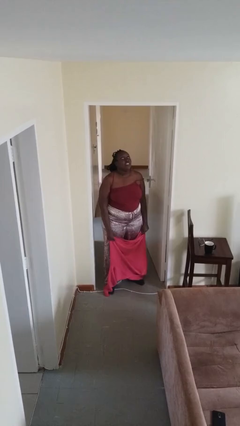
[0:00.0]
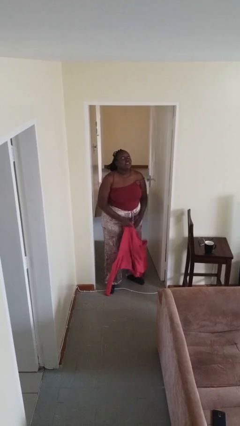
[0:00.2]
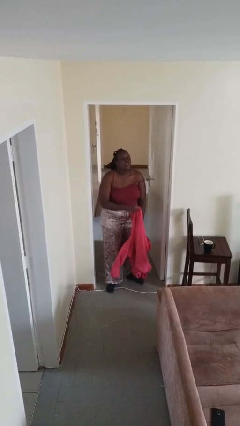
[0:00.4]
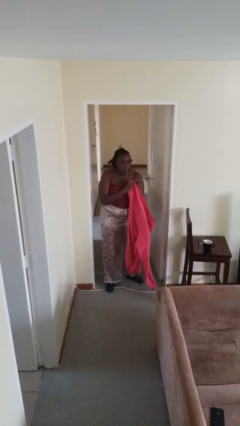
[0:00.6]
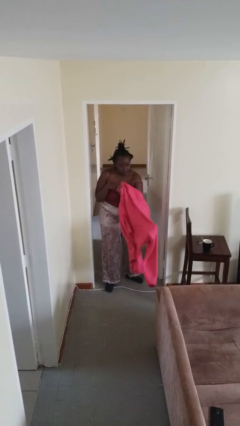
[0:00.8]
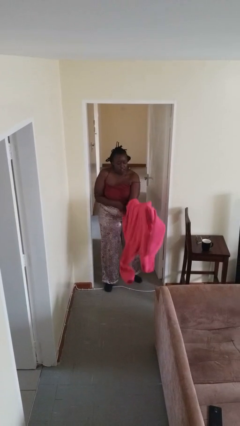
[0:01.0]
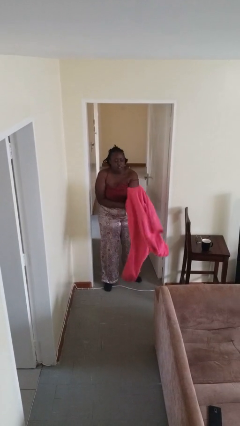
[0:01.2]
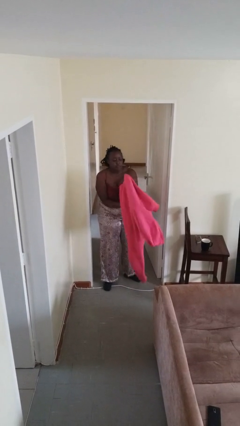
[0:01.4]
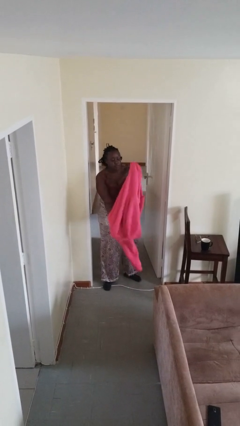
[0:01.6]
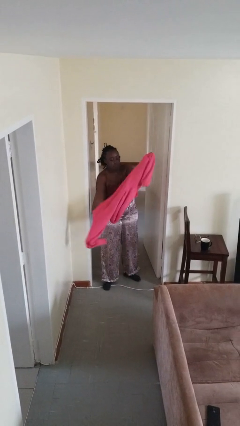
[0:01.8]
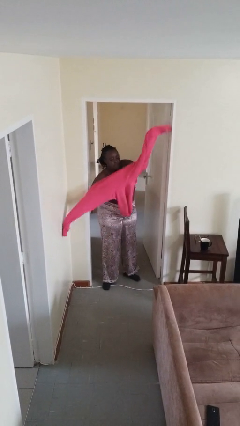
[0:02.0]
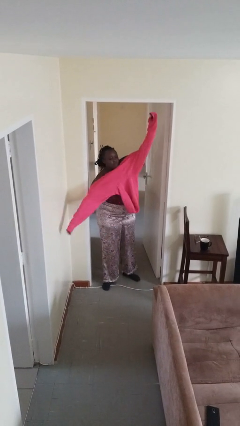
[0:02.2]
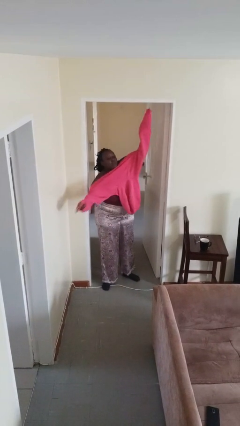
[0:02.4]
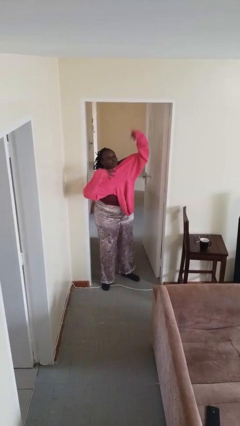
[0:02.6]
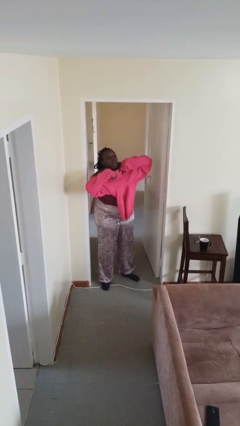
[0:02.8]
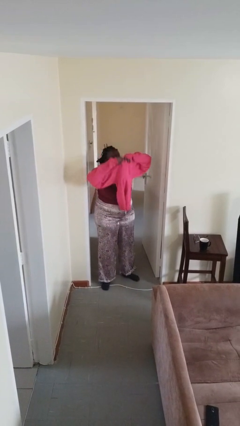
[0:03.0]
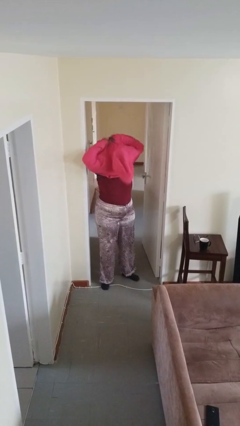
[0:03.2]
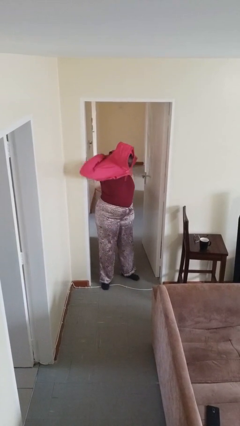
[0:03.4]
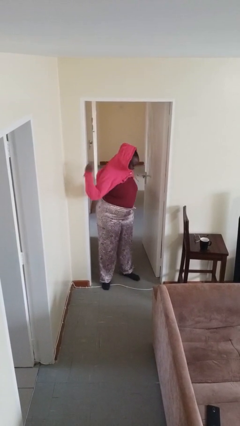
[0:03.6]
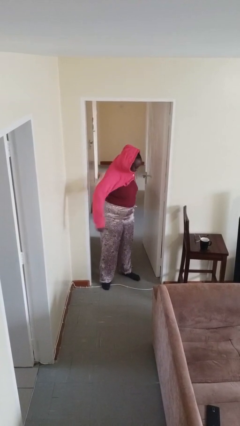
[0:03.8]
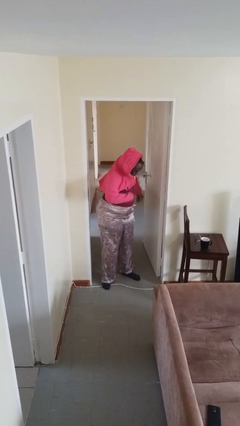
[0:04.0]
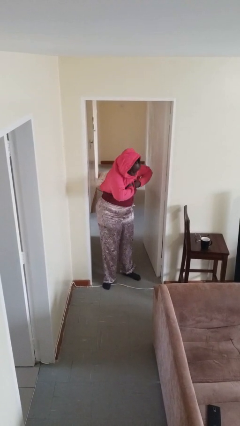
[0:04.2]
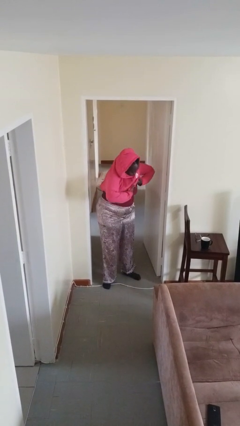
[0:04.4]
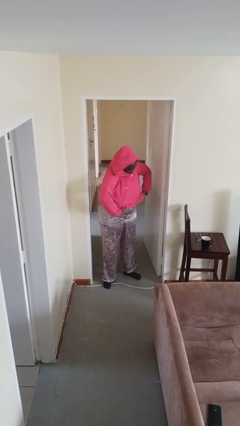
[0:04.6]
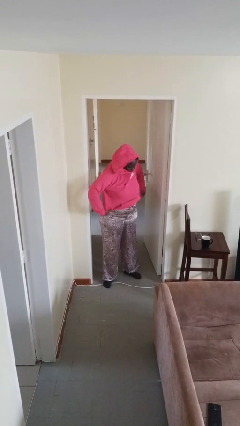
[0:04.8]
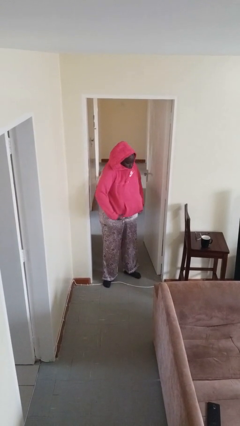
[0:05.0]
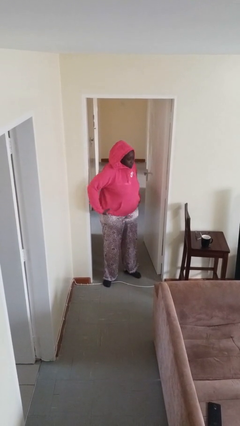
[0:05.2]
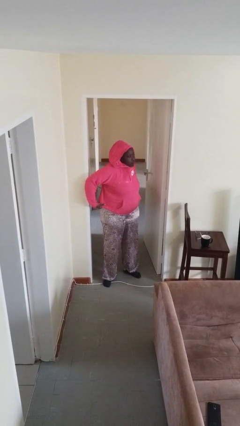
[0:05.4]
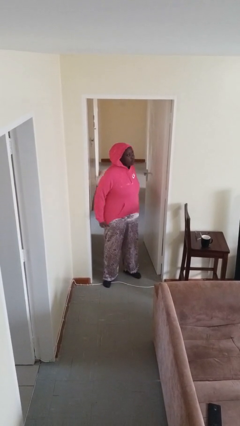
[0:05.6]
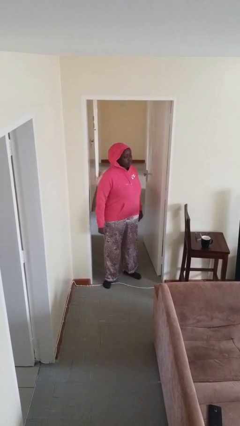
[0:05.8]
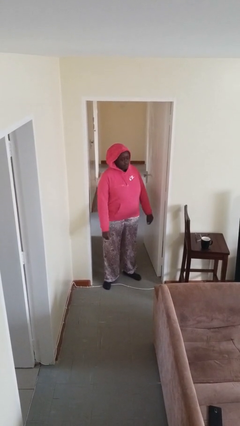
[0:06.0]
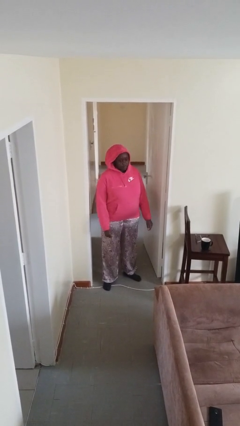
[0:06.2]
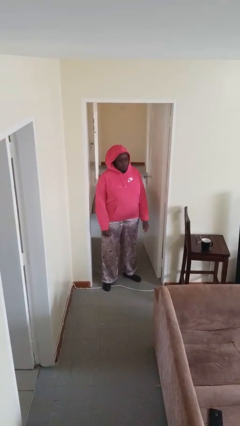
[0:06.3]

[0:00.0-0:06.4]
person puts on hoodie

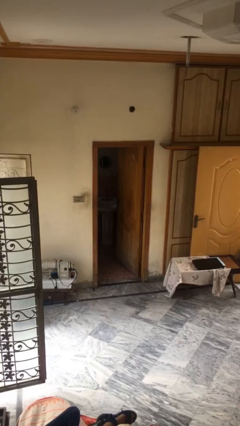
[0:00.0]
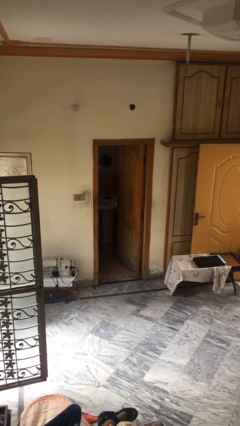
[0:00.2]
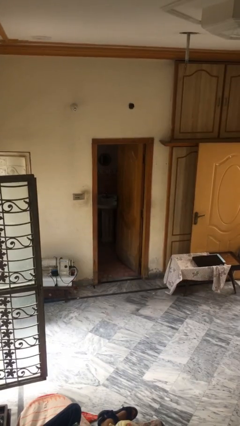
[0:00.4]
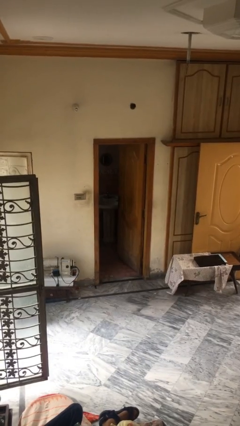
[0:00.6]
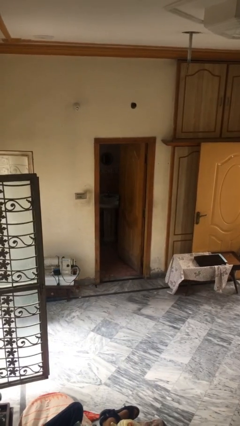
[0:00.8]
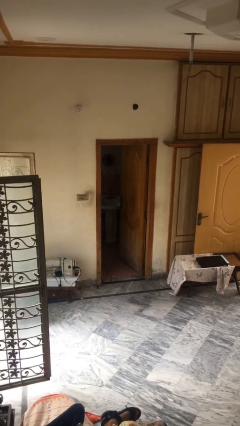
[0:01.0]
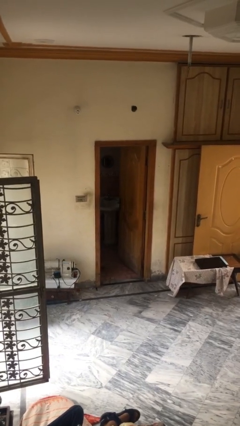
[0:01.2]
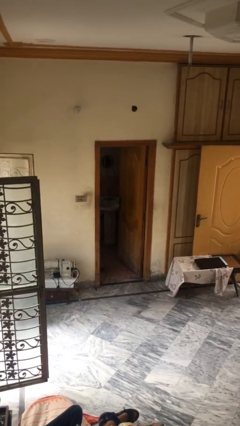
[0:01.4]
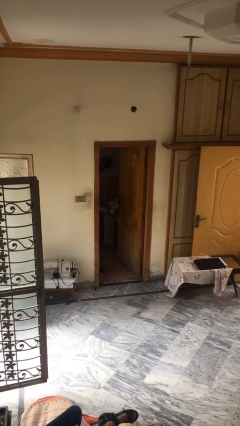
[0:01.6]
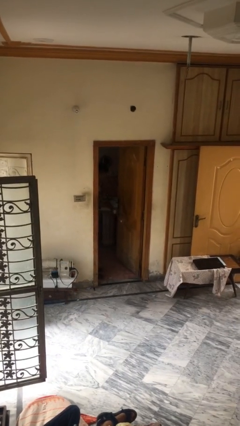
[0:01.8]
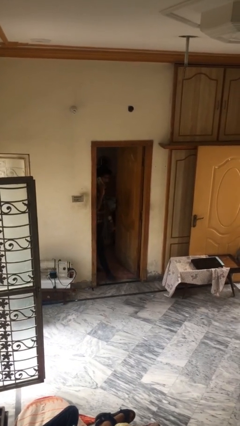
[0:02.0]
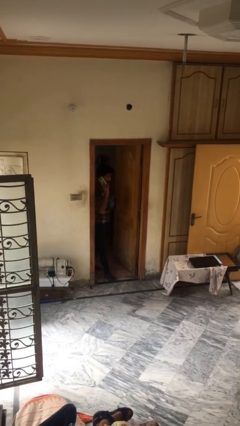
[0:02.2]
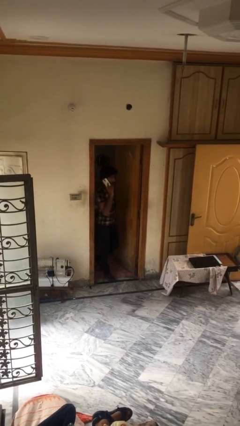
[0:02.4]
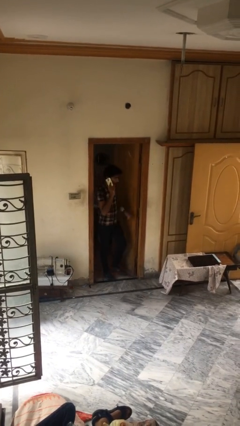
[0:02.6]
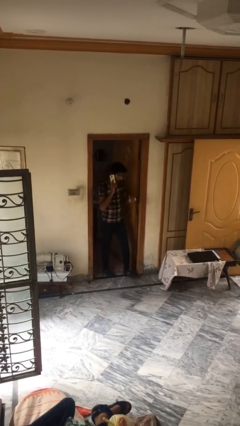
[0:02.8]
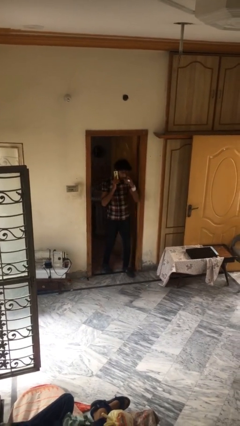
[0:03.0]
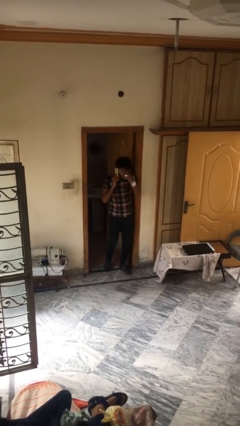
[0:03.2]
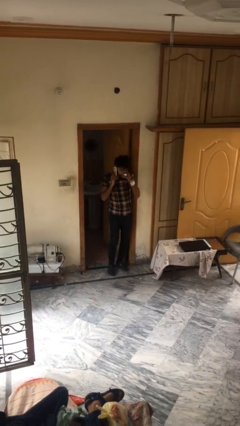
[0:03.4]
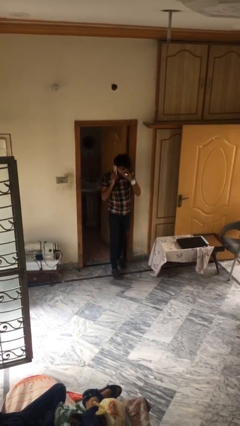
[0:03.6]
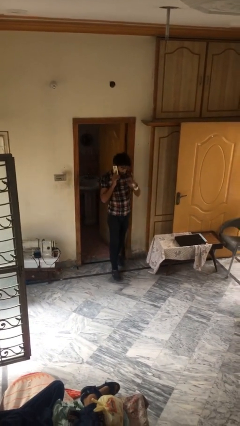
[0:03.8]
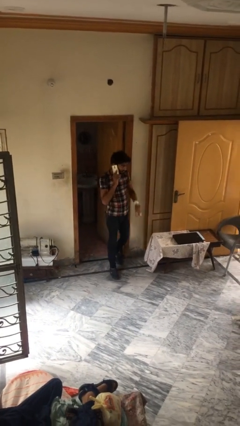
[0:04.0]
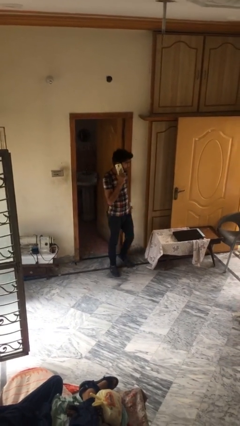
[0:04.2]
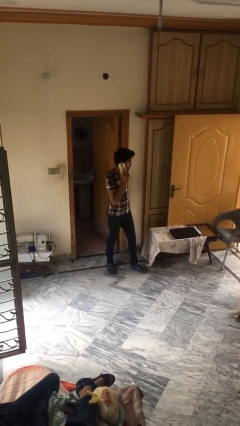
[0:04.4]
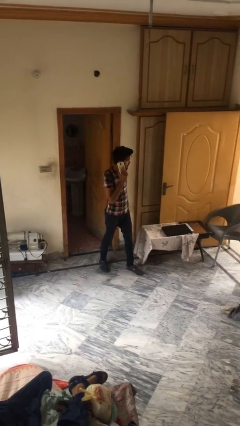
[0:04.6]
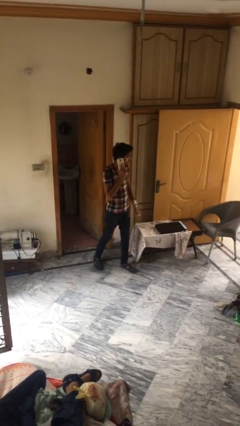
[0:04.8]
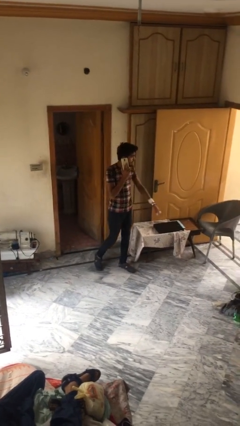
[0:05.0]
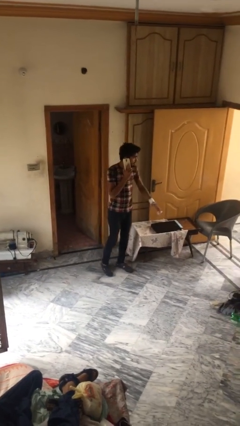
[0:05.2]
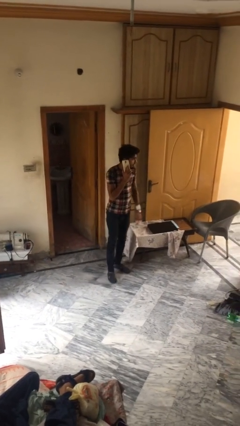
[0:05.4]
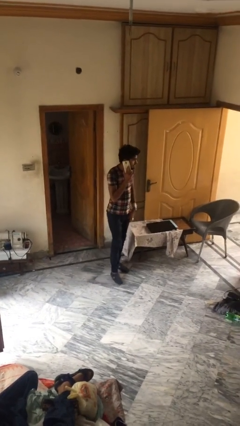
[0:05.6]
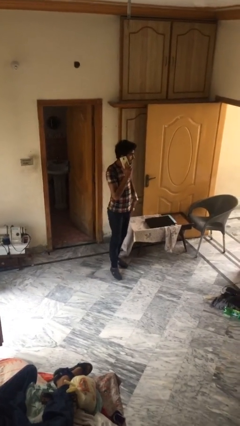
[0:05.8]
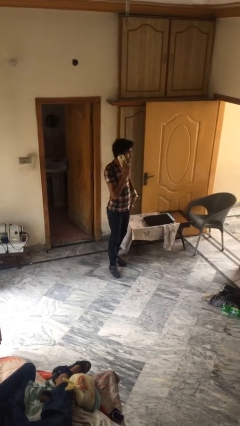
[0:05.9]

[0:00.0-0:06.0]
person enters scene through structure

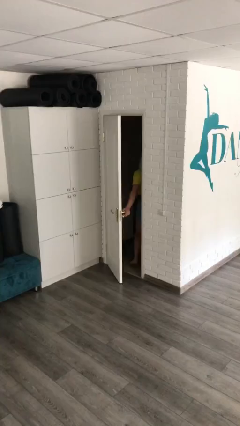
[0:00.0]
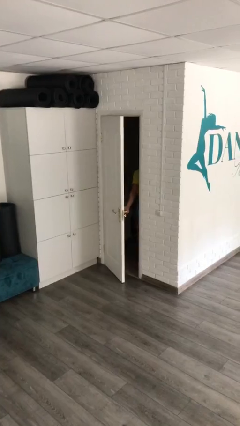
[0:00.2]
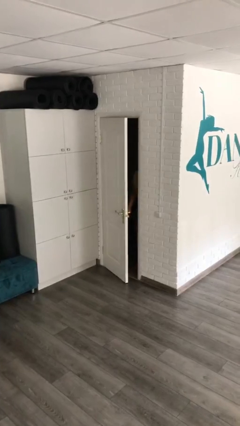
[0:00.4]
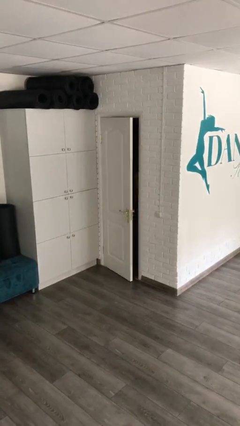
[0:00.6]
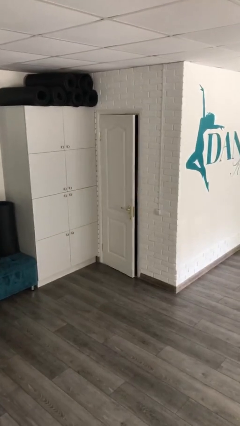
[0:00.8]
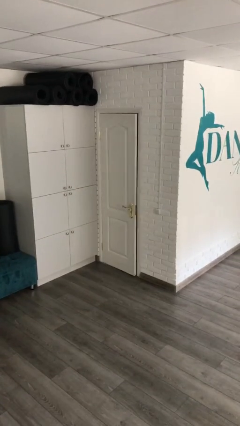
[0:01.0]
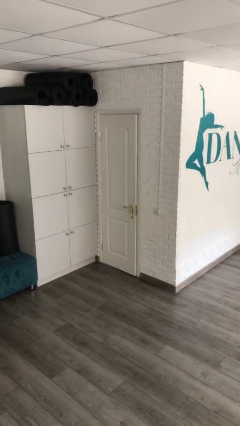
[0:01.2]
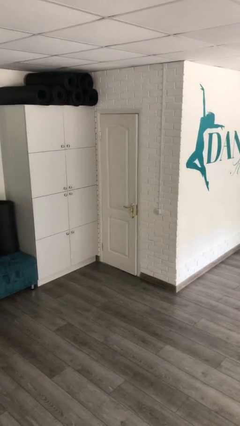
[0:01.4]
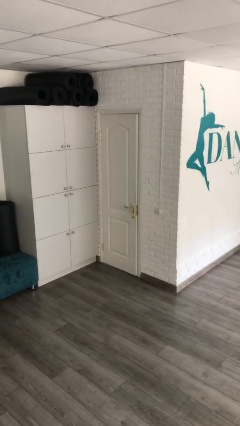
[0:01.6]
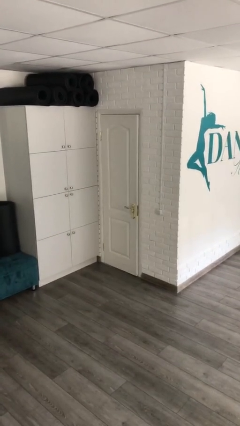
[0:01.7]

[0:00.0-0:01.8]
person closes facility door

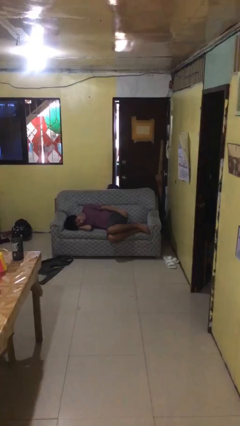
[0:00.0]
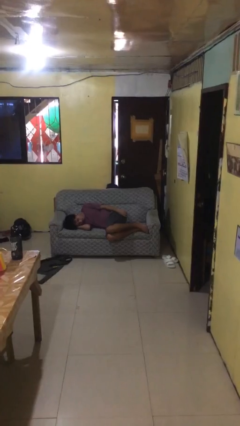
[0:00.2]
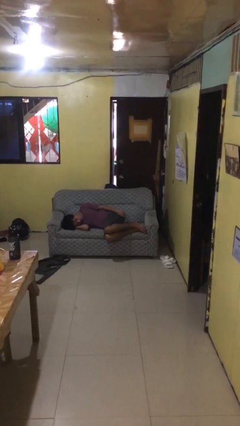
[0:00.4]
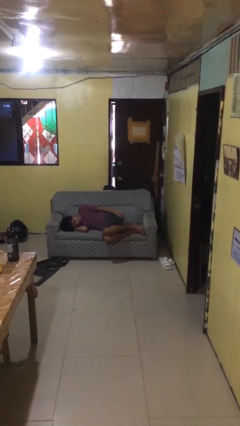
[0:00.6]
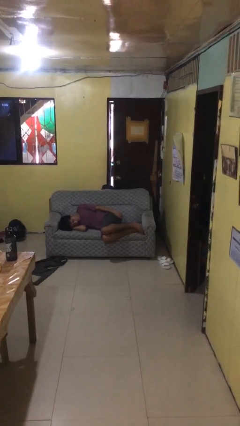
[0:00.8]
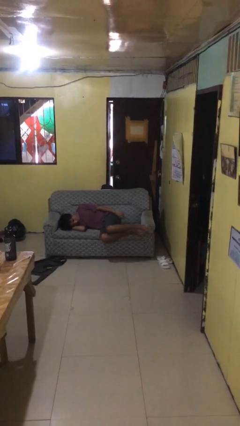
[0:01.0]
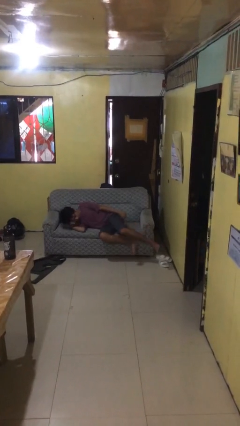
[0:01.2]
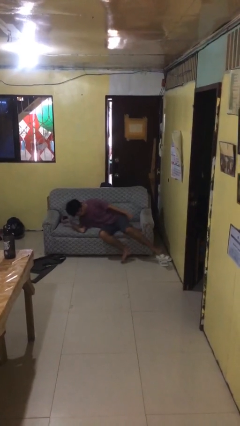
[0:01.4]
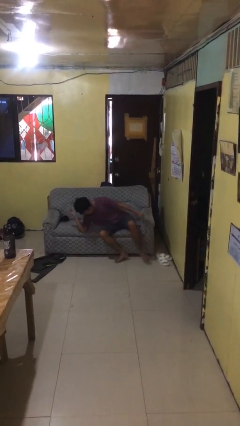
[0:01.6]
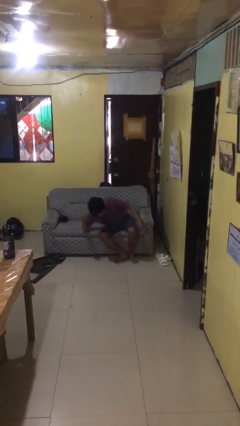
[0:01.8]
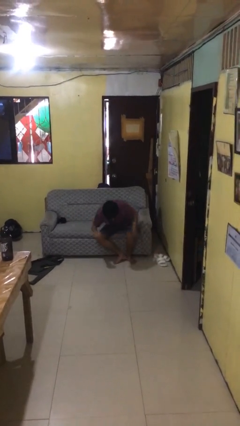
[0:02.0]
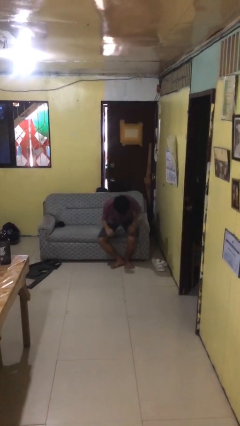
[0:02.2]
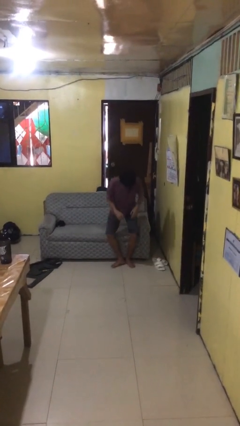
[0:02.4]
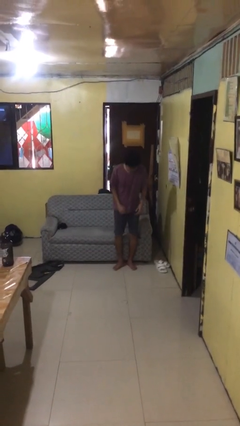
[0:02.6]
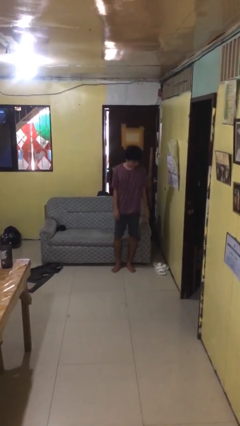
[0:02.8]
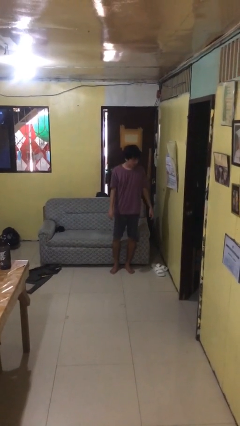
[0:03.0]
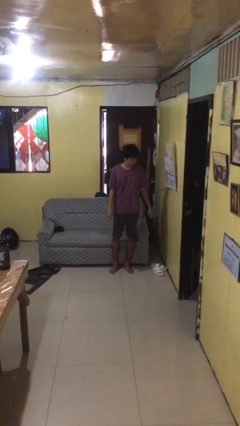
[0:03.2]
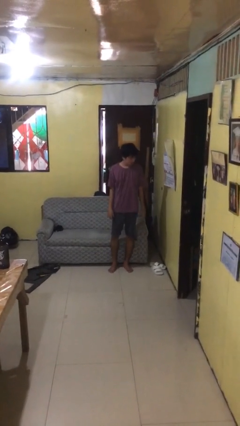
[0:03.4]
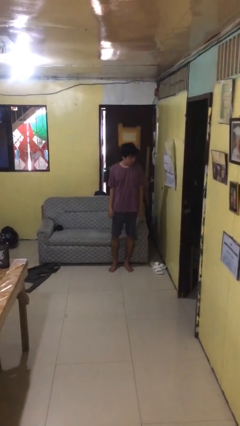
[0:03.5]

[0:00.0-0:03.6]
person stands up
